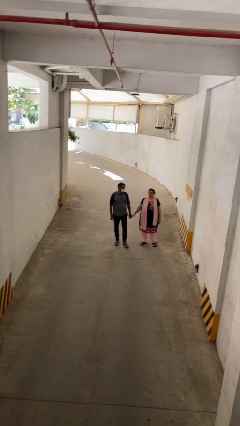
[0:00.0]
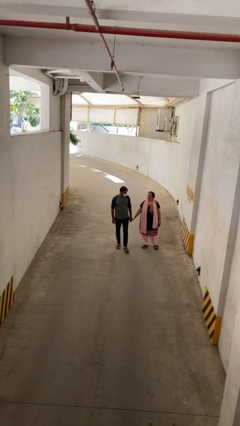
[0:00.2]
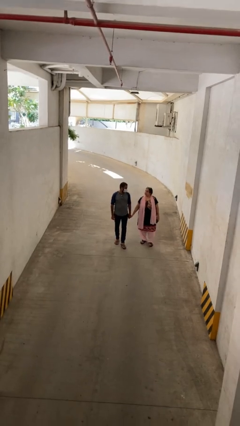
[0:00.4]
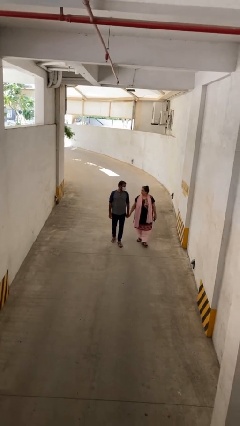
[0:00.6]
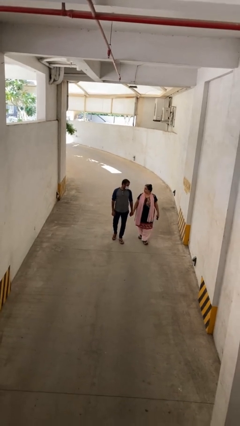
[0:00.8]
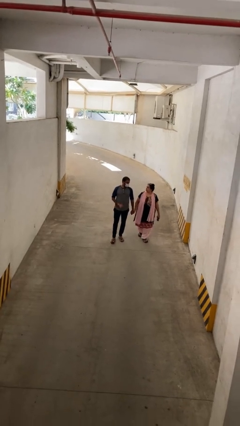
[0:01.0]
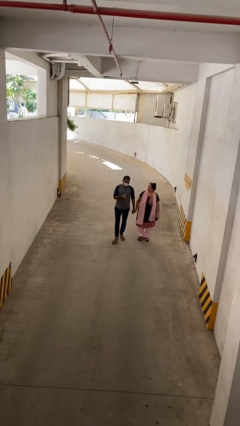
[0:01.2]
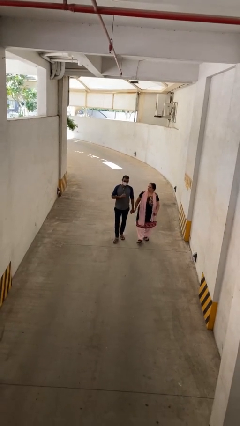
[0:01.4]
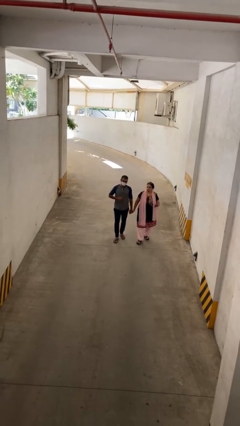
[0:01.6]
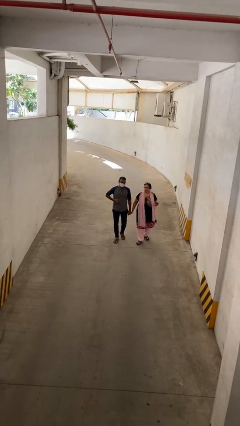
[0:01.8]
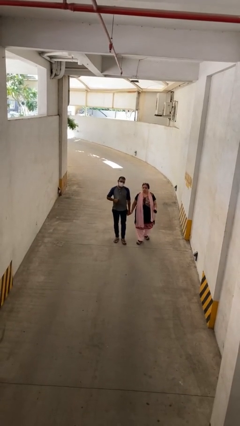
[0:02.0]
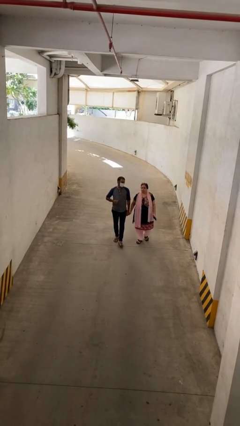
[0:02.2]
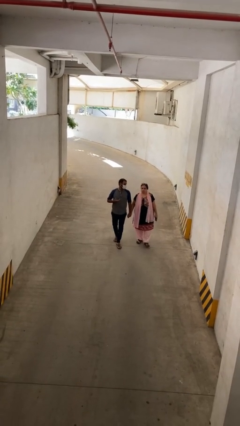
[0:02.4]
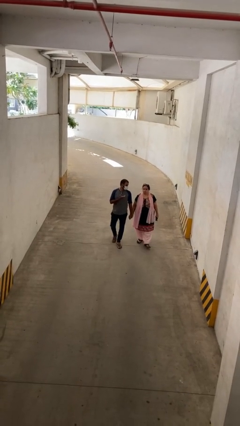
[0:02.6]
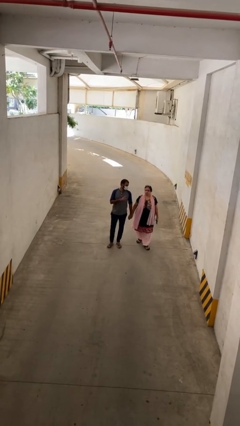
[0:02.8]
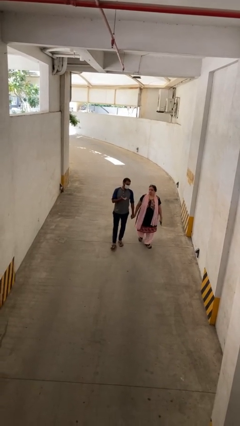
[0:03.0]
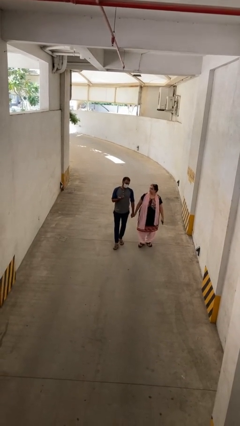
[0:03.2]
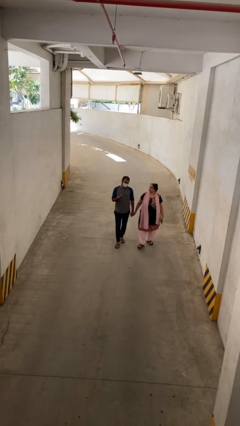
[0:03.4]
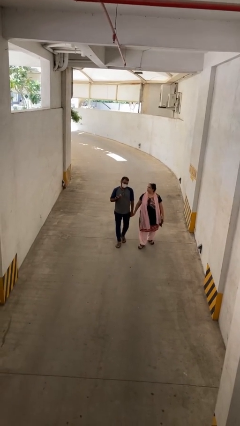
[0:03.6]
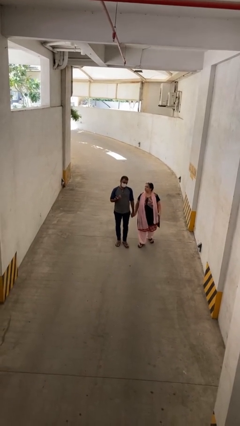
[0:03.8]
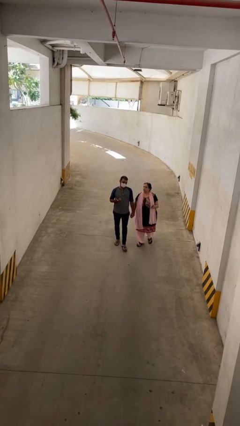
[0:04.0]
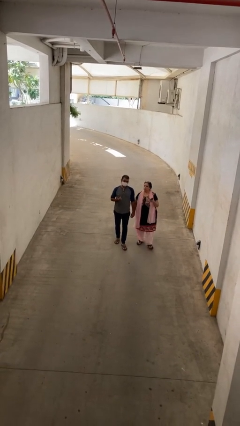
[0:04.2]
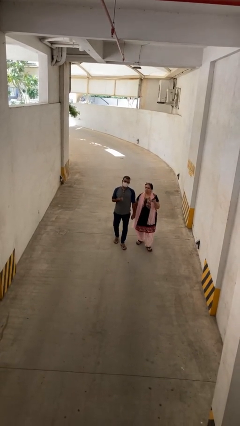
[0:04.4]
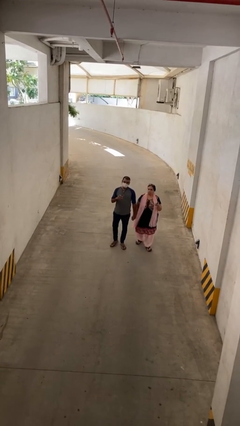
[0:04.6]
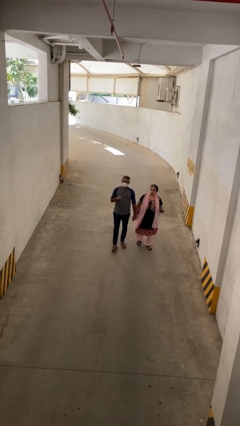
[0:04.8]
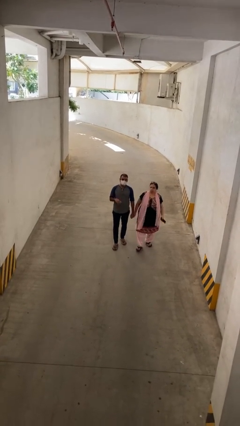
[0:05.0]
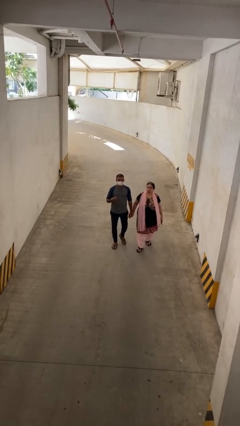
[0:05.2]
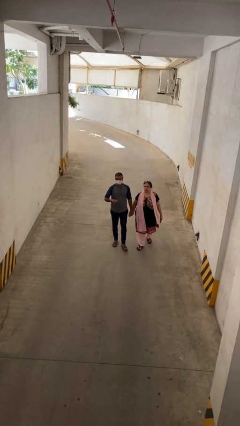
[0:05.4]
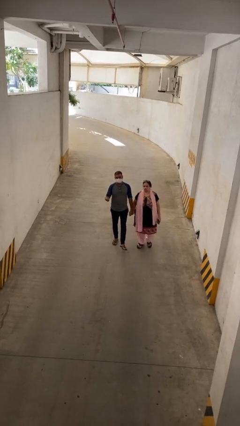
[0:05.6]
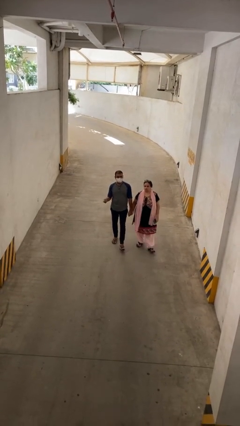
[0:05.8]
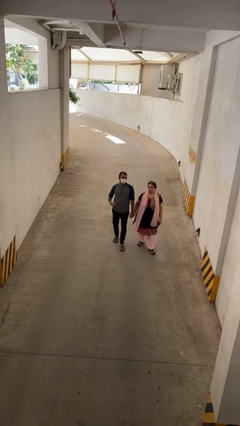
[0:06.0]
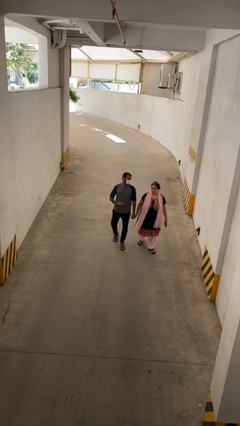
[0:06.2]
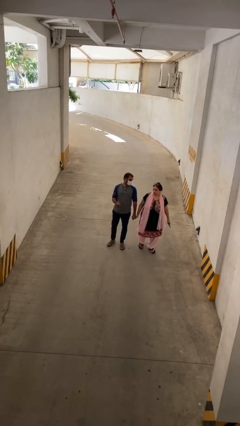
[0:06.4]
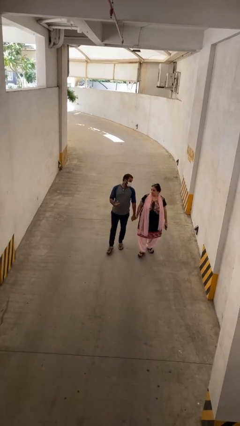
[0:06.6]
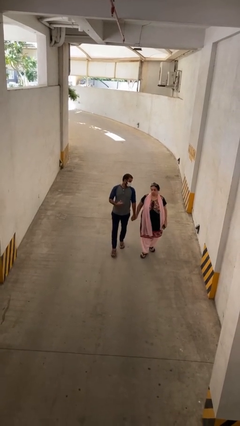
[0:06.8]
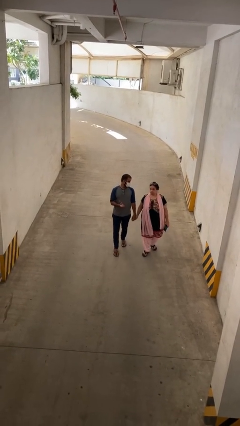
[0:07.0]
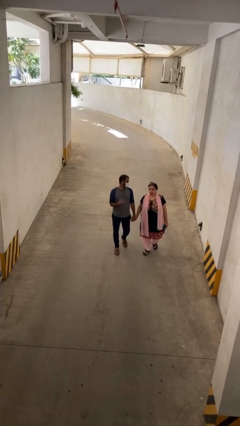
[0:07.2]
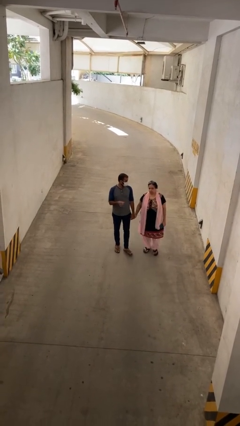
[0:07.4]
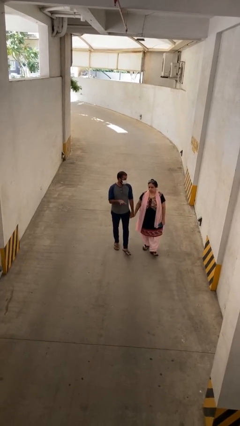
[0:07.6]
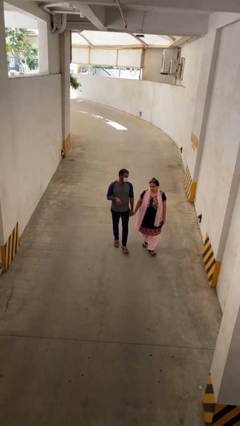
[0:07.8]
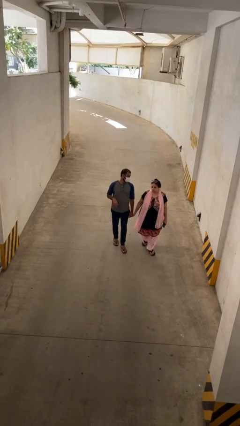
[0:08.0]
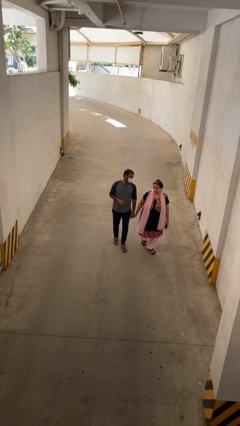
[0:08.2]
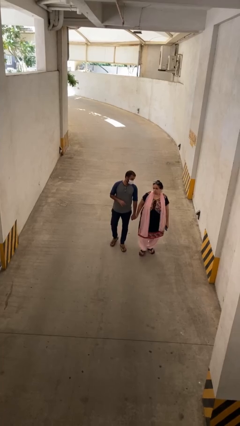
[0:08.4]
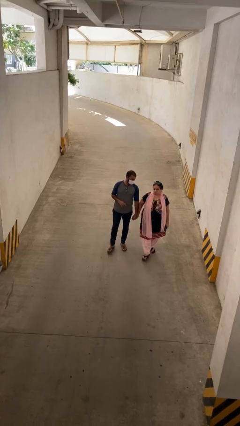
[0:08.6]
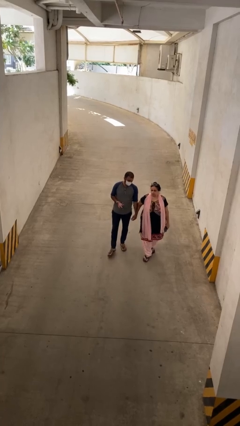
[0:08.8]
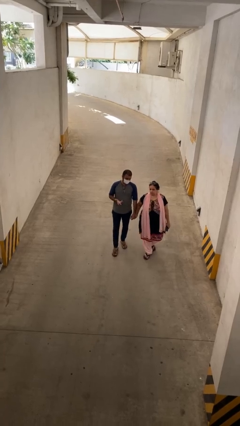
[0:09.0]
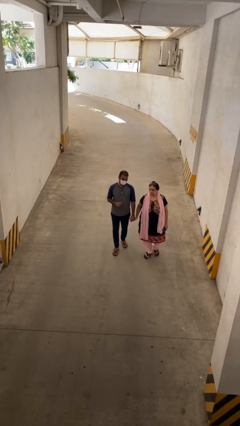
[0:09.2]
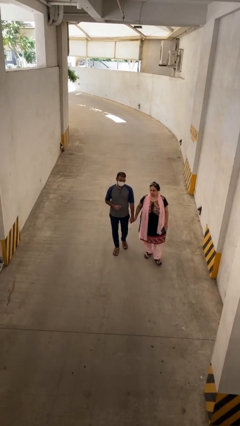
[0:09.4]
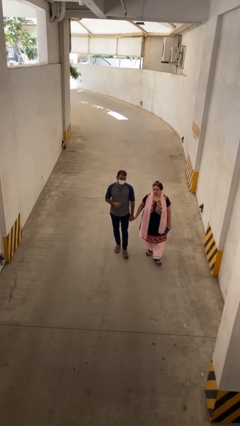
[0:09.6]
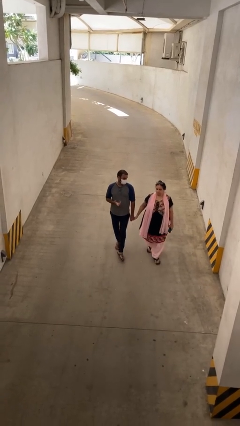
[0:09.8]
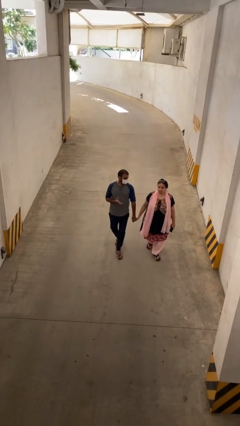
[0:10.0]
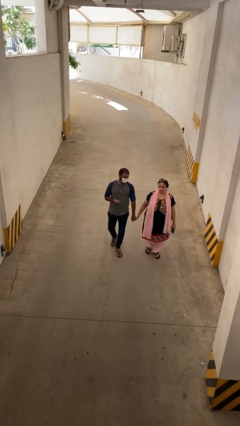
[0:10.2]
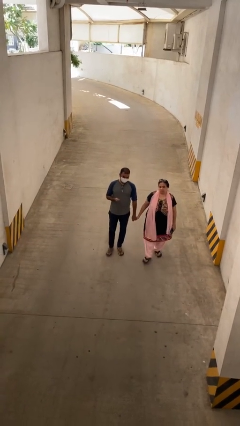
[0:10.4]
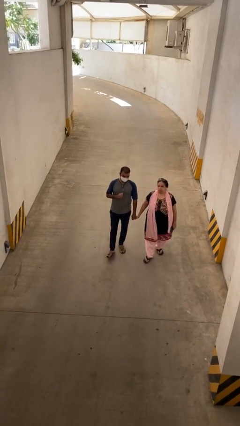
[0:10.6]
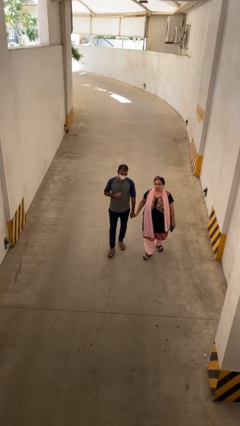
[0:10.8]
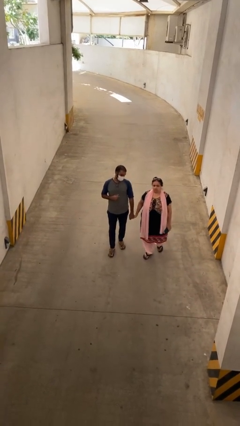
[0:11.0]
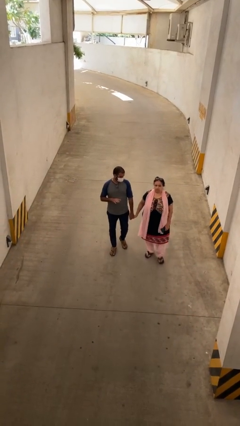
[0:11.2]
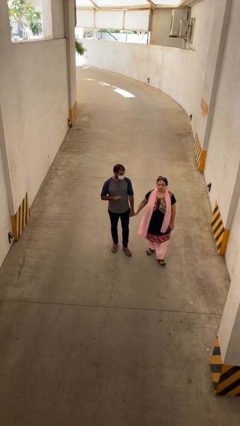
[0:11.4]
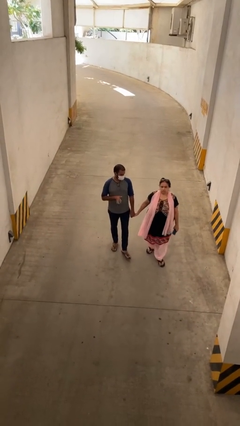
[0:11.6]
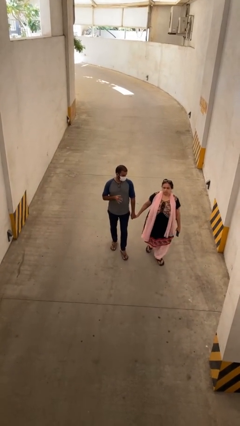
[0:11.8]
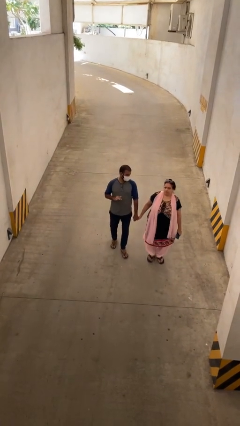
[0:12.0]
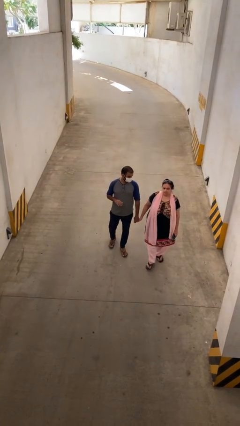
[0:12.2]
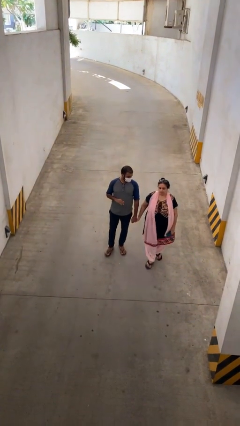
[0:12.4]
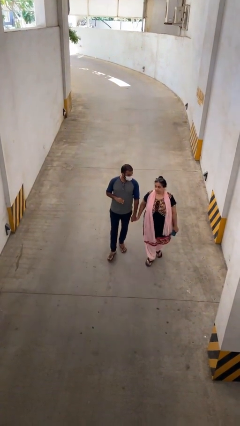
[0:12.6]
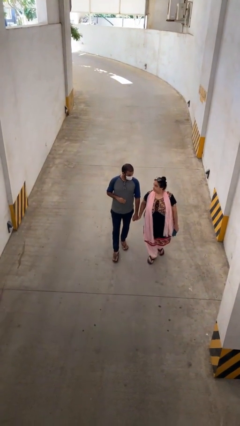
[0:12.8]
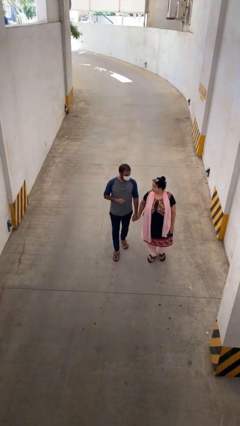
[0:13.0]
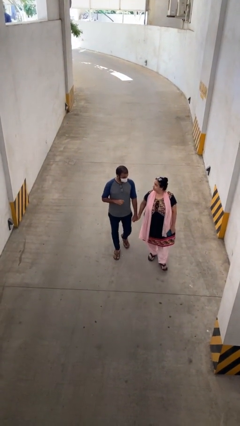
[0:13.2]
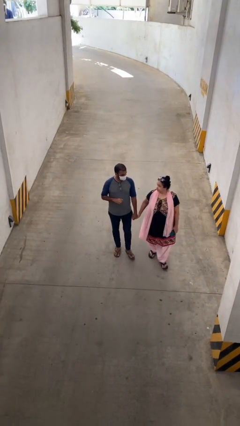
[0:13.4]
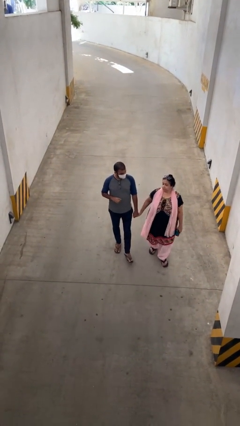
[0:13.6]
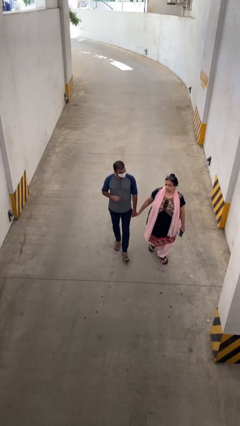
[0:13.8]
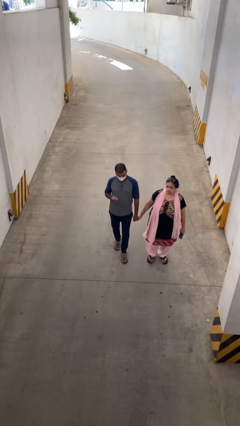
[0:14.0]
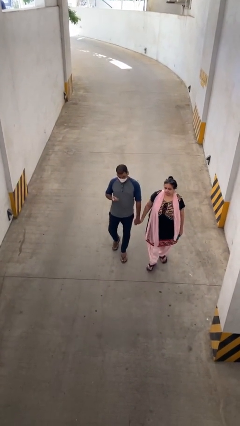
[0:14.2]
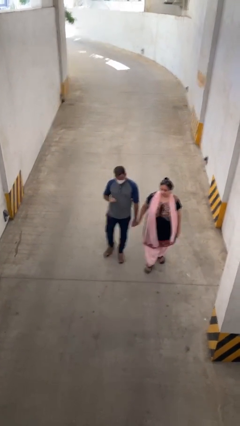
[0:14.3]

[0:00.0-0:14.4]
person holds hand

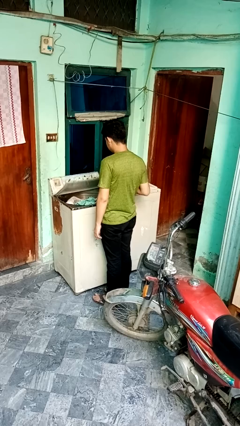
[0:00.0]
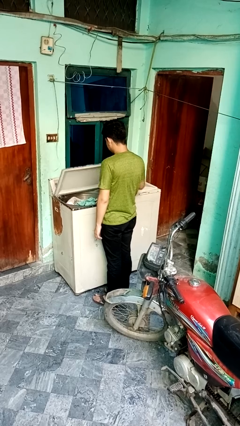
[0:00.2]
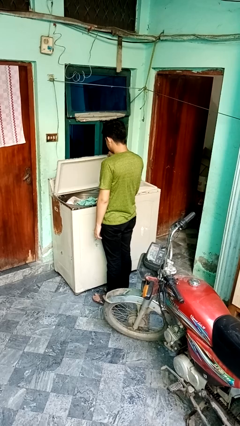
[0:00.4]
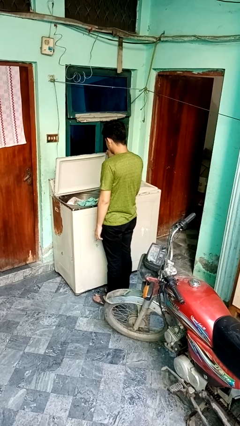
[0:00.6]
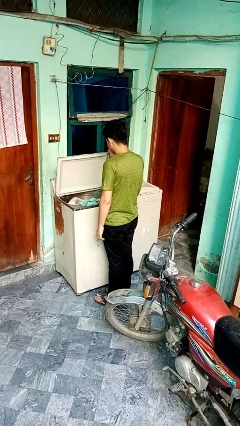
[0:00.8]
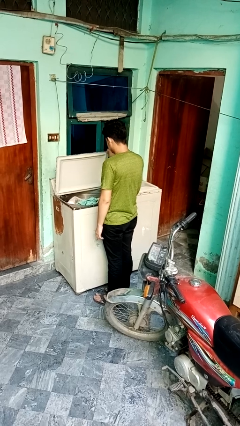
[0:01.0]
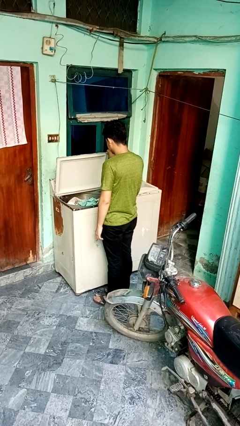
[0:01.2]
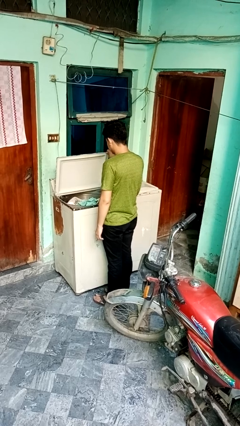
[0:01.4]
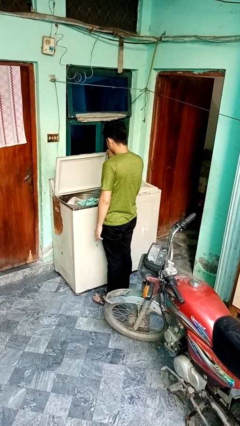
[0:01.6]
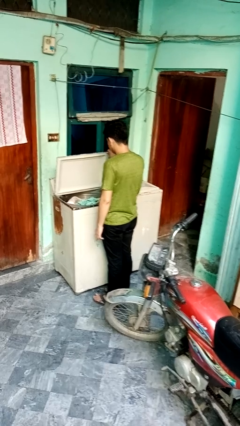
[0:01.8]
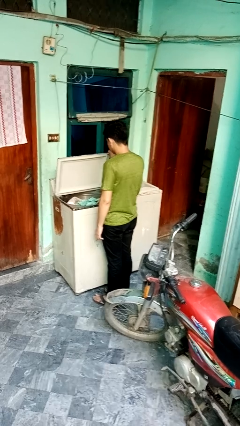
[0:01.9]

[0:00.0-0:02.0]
person opens clothes washer

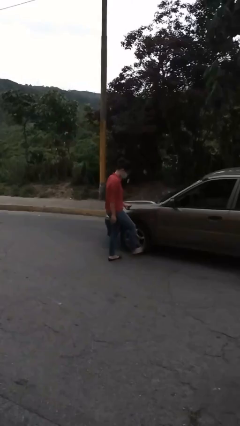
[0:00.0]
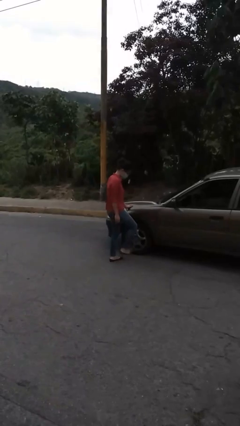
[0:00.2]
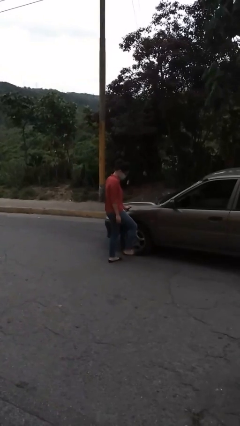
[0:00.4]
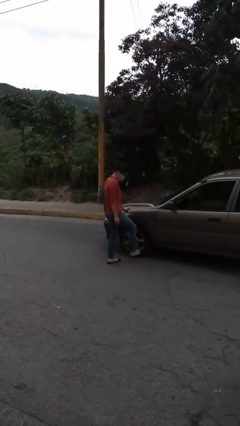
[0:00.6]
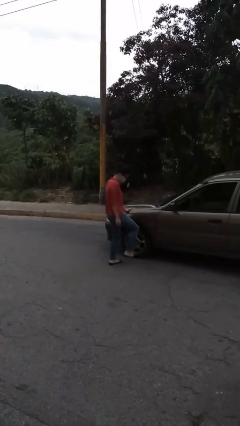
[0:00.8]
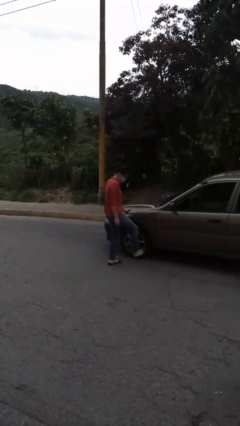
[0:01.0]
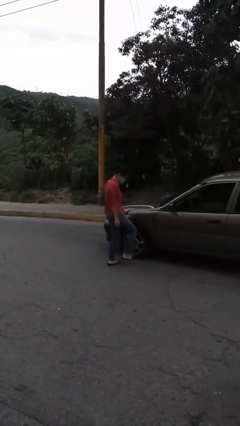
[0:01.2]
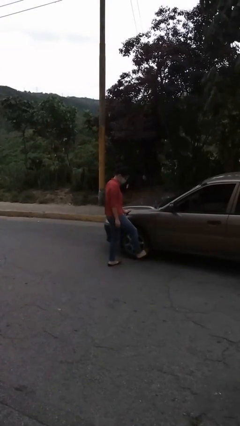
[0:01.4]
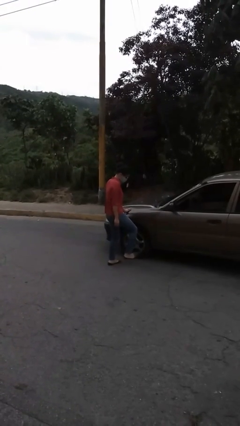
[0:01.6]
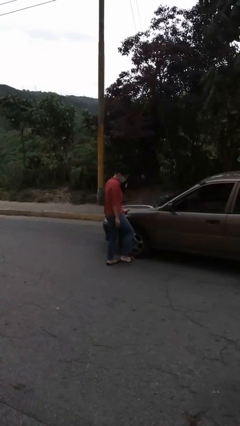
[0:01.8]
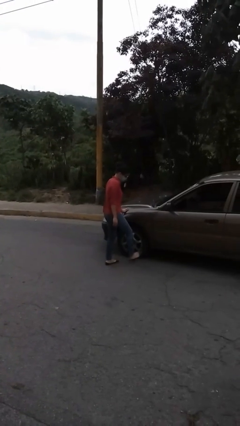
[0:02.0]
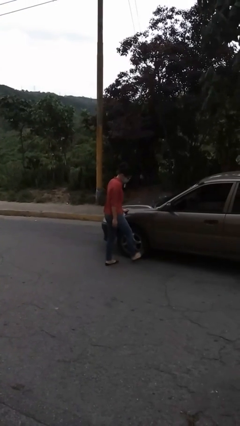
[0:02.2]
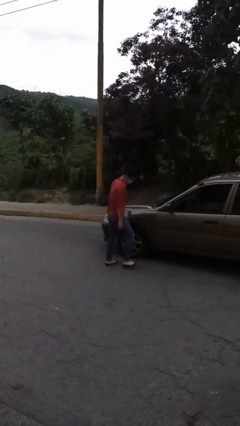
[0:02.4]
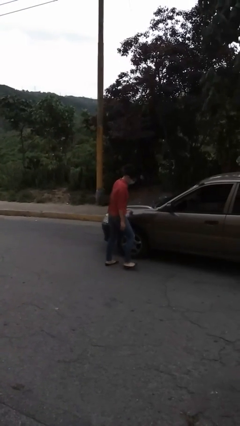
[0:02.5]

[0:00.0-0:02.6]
person kicks car tires
